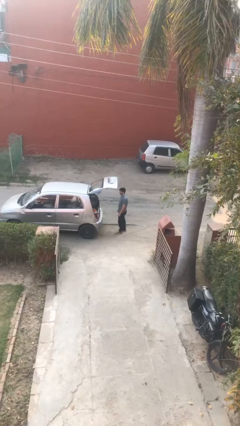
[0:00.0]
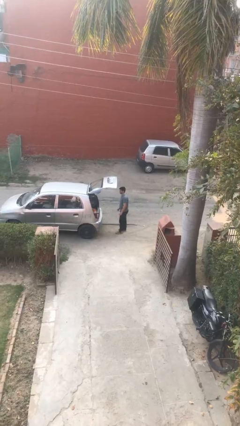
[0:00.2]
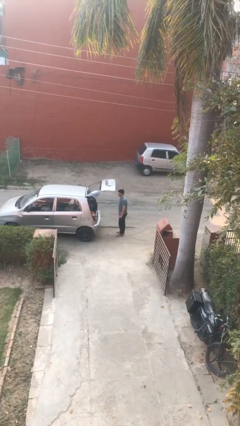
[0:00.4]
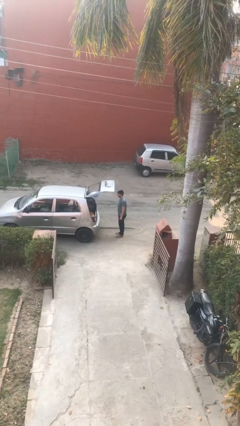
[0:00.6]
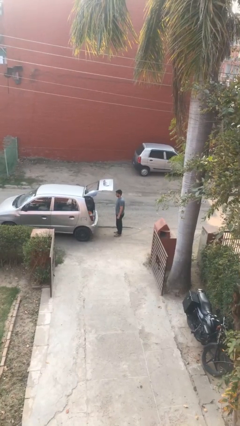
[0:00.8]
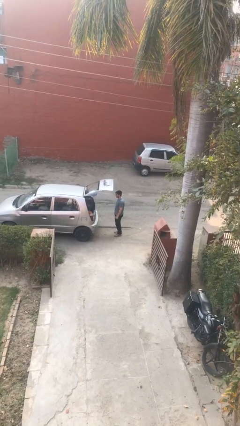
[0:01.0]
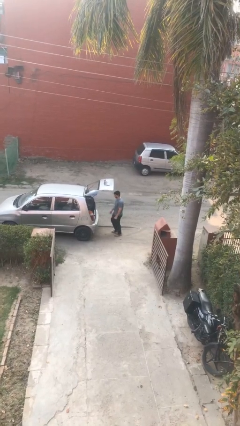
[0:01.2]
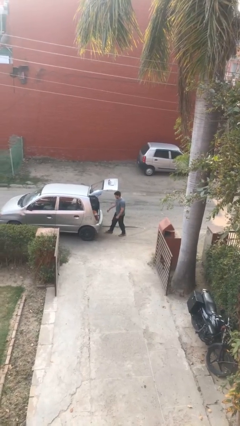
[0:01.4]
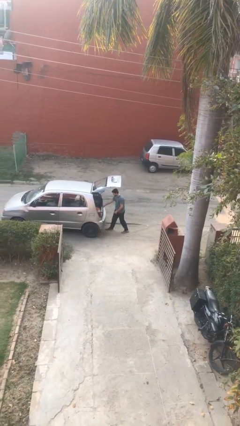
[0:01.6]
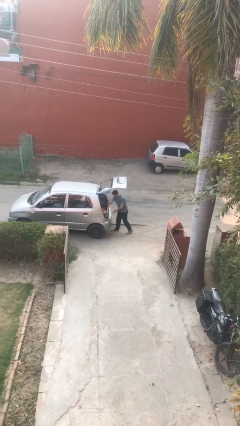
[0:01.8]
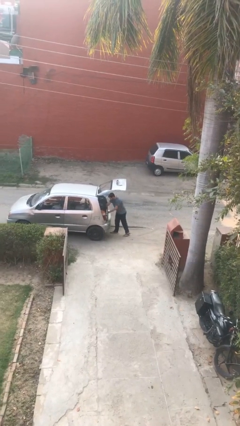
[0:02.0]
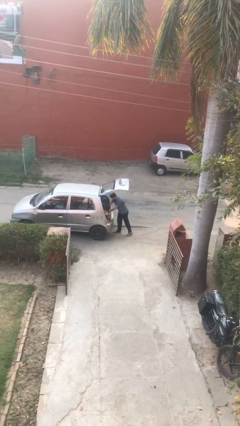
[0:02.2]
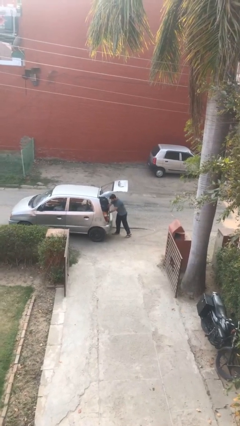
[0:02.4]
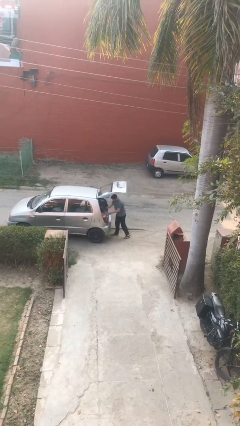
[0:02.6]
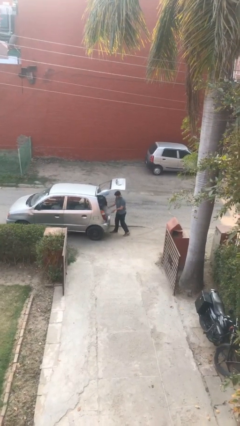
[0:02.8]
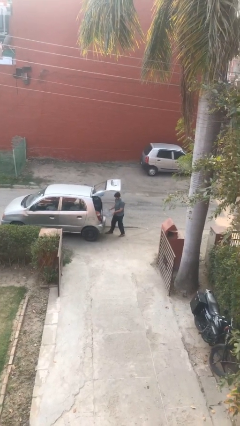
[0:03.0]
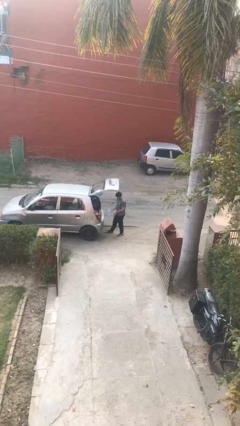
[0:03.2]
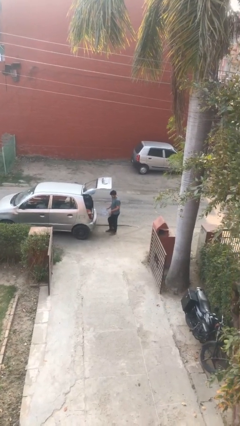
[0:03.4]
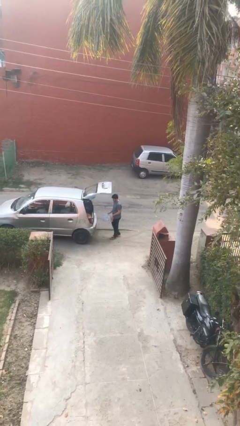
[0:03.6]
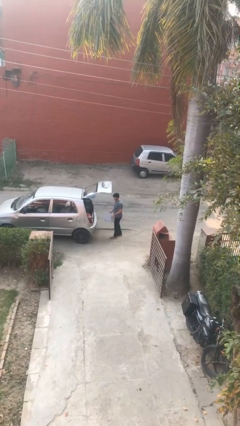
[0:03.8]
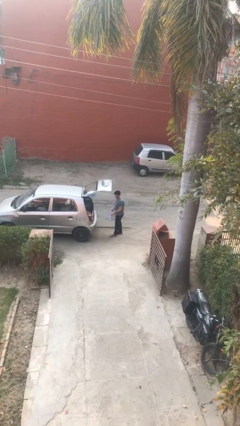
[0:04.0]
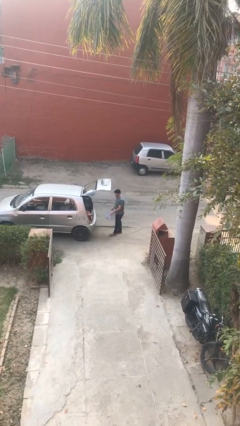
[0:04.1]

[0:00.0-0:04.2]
person unloads car

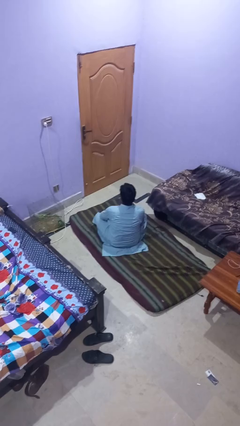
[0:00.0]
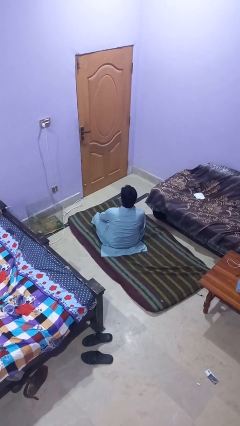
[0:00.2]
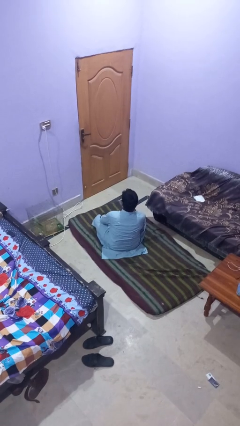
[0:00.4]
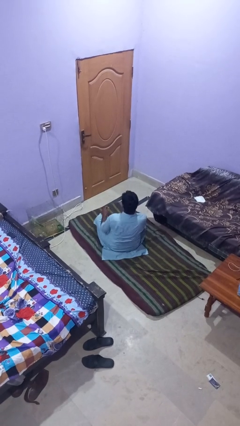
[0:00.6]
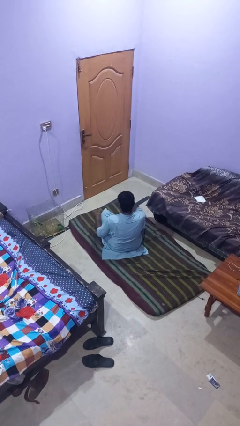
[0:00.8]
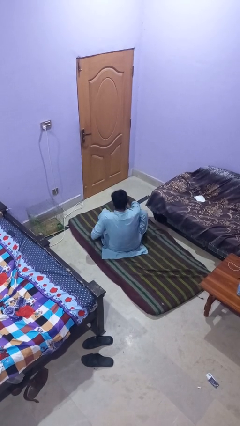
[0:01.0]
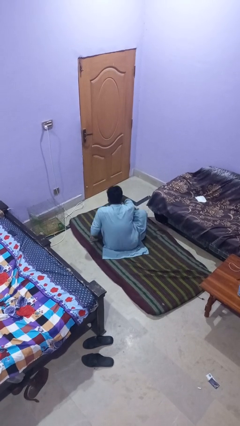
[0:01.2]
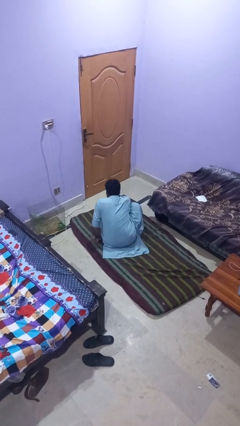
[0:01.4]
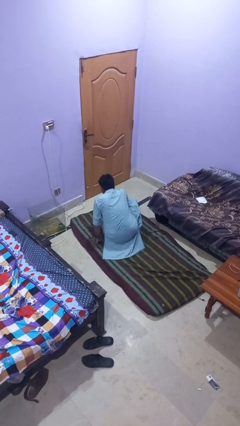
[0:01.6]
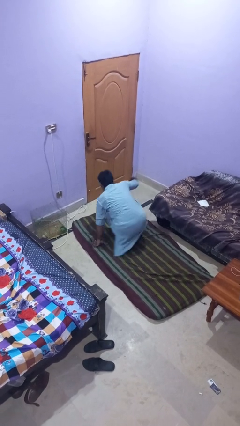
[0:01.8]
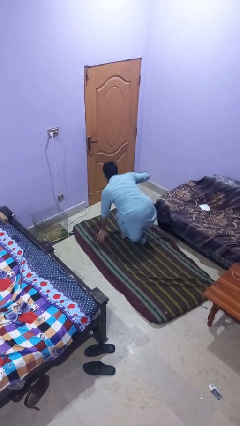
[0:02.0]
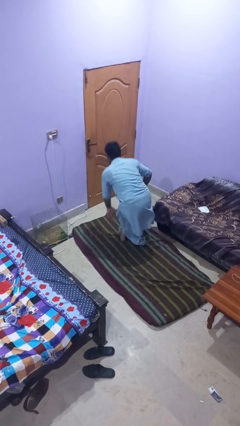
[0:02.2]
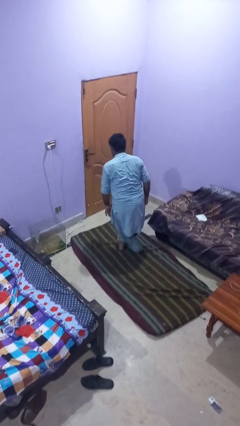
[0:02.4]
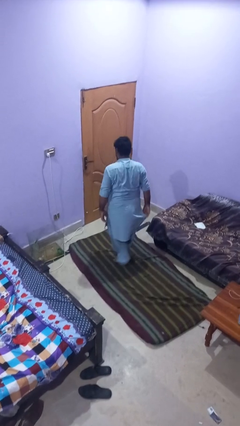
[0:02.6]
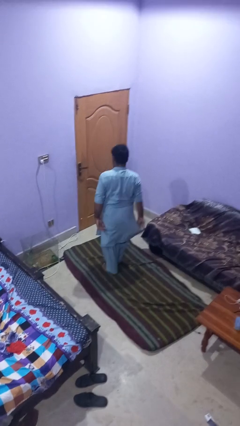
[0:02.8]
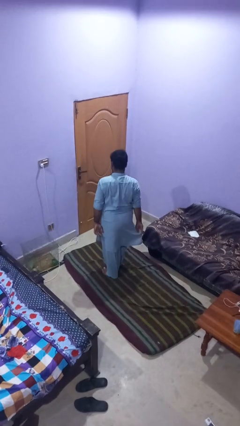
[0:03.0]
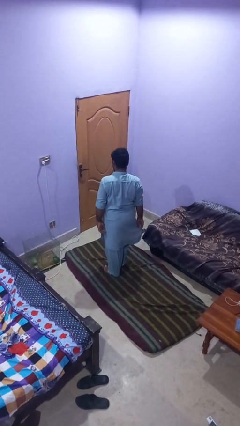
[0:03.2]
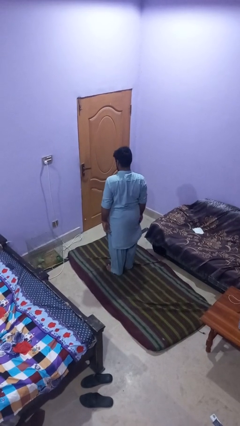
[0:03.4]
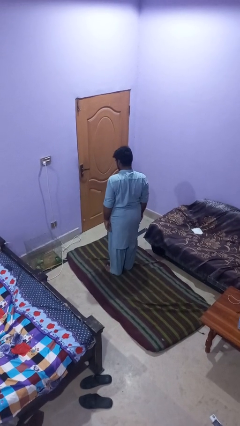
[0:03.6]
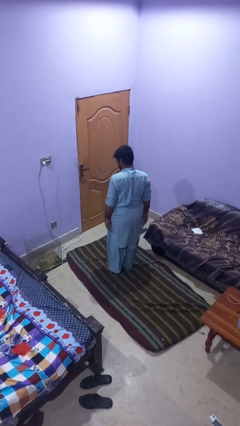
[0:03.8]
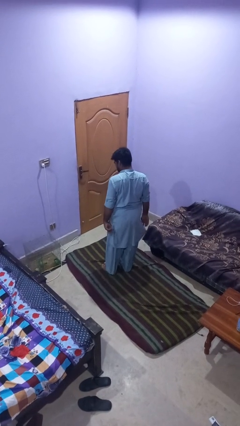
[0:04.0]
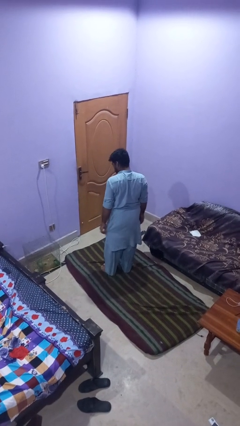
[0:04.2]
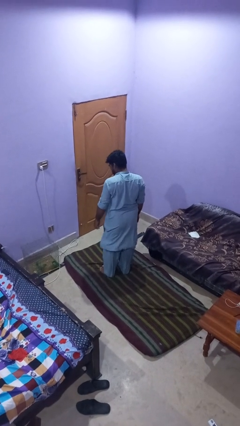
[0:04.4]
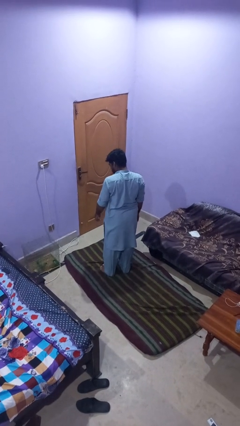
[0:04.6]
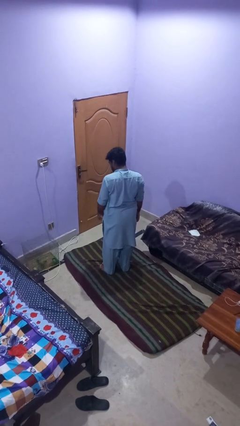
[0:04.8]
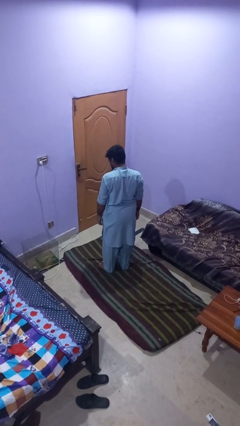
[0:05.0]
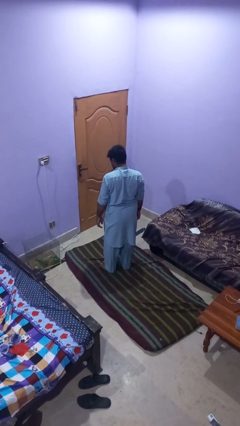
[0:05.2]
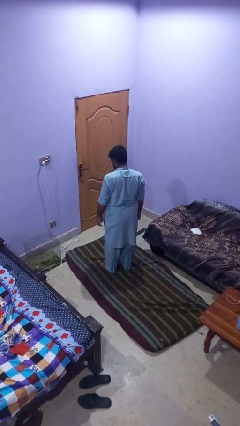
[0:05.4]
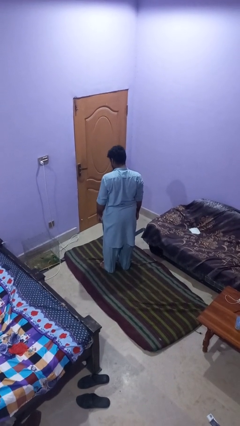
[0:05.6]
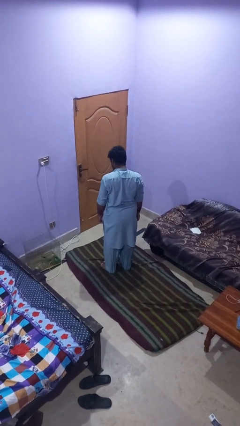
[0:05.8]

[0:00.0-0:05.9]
person stands up from floor

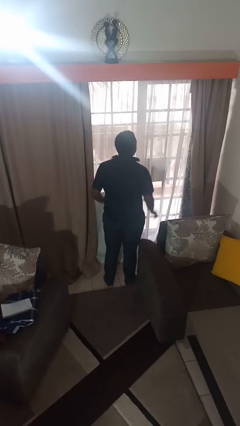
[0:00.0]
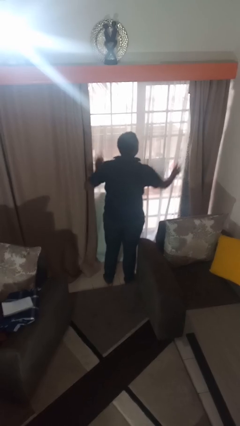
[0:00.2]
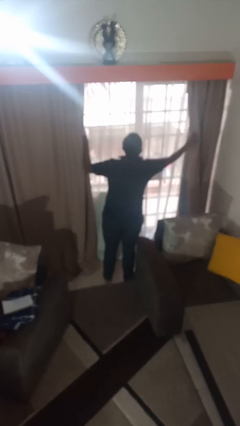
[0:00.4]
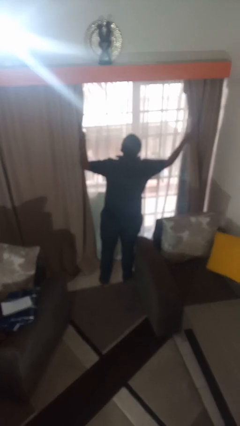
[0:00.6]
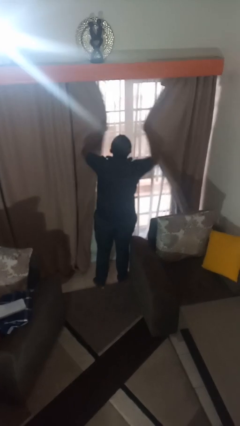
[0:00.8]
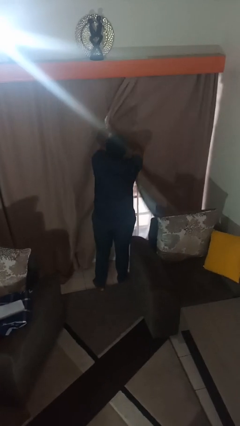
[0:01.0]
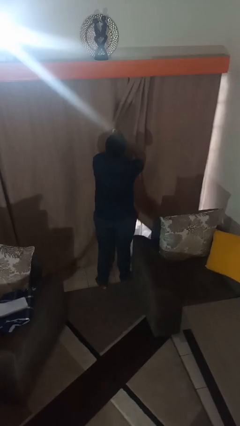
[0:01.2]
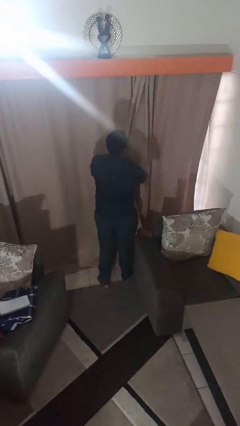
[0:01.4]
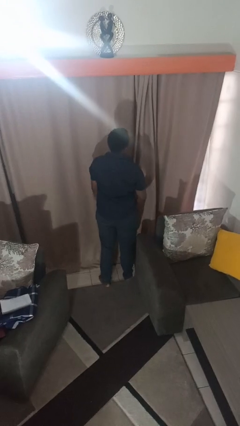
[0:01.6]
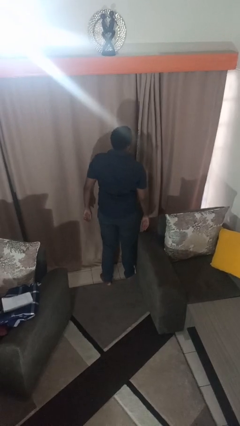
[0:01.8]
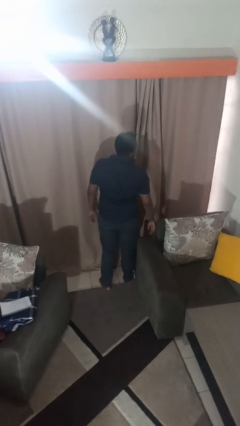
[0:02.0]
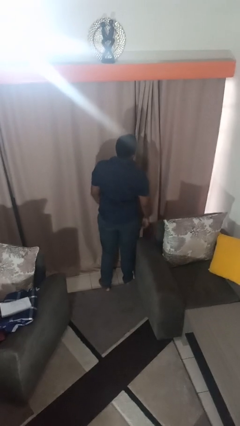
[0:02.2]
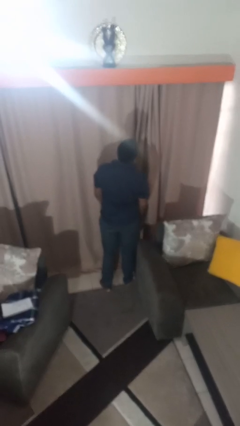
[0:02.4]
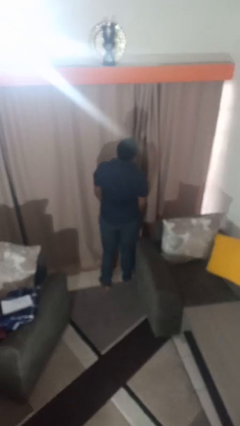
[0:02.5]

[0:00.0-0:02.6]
person closes curtains

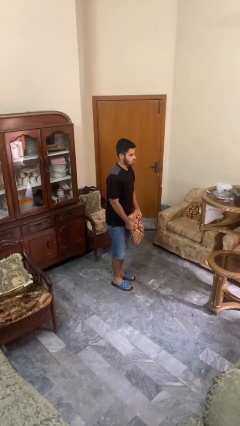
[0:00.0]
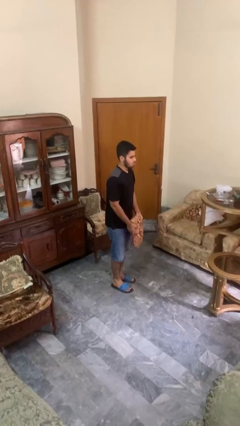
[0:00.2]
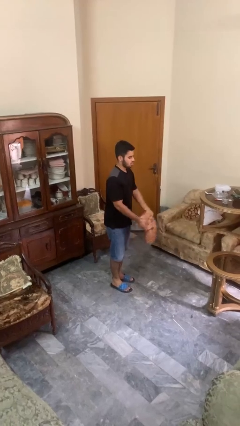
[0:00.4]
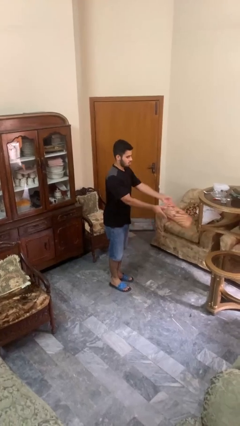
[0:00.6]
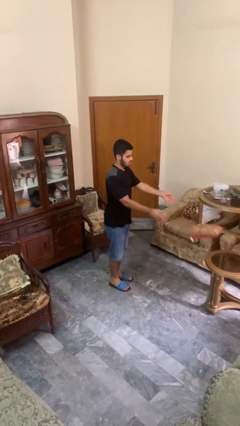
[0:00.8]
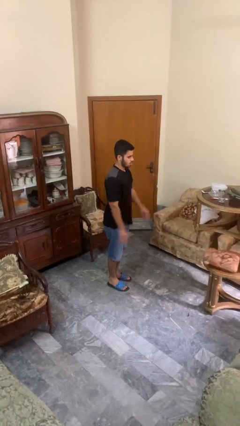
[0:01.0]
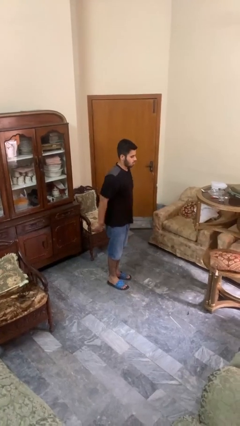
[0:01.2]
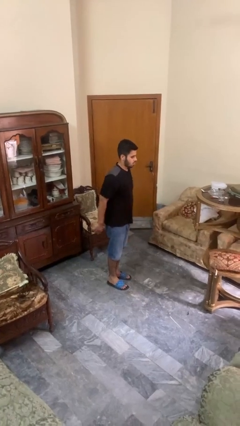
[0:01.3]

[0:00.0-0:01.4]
person throws object on table

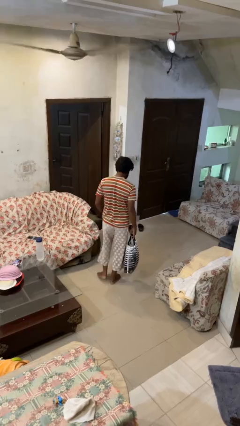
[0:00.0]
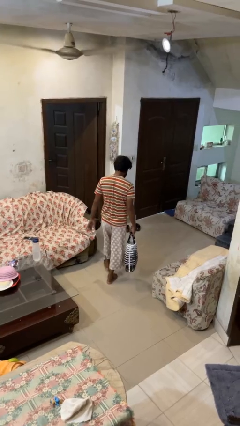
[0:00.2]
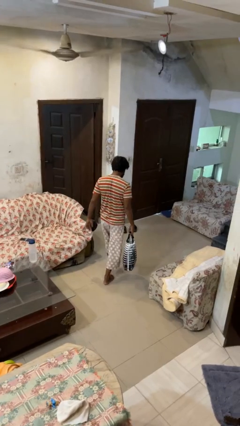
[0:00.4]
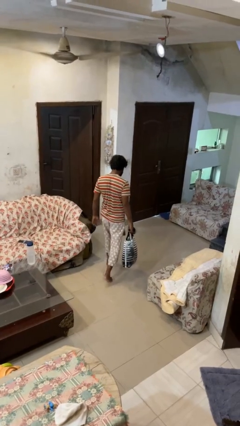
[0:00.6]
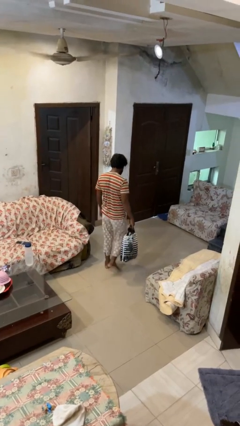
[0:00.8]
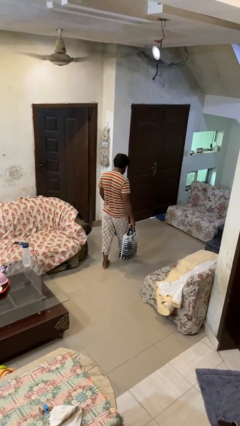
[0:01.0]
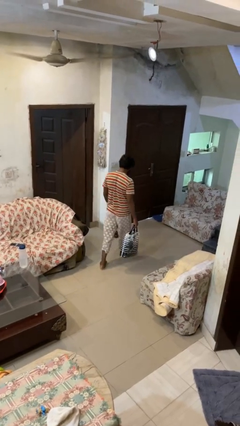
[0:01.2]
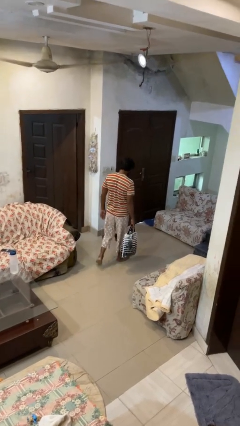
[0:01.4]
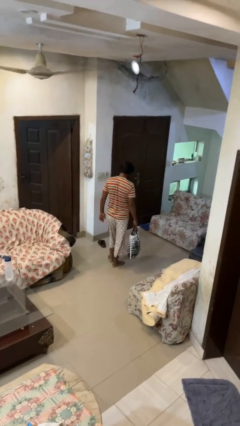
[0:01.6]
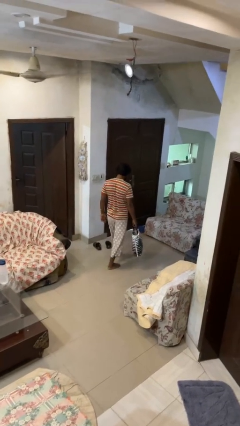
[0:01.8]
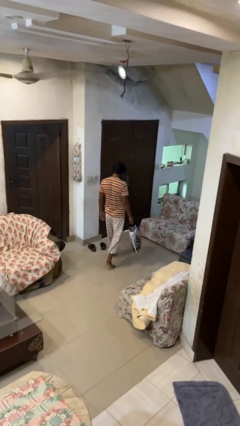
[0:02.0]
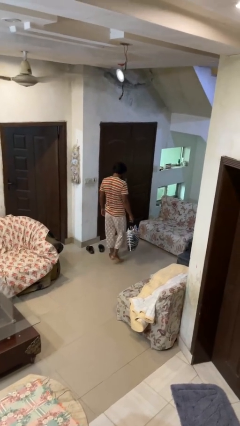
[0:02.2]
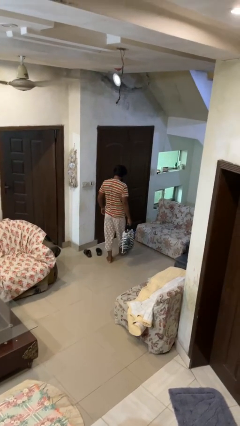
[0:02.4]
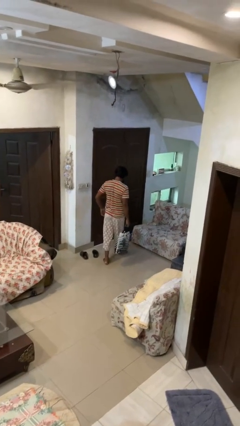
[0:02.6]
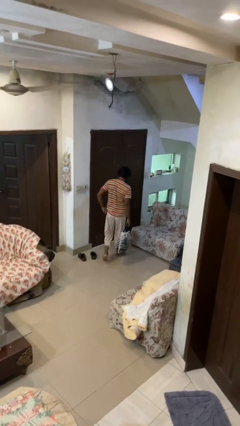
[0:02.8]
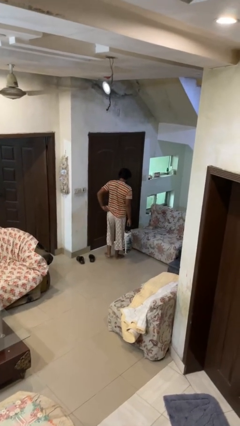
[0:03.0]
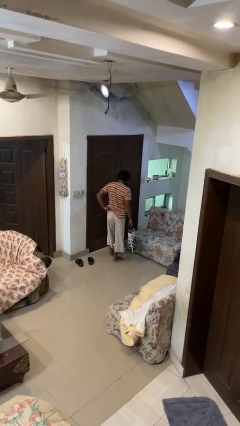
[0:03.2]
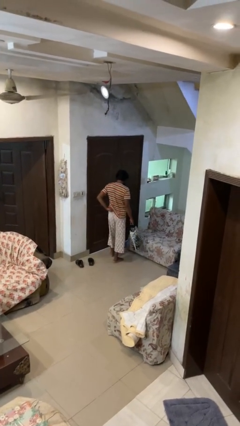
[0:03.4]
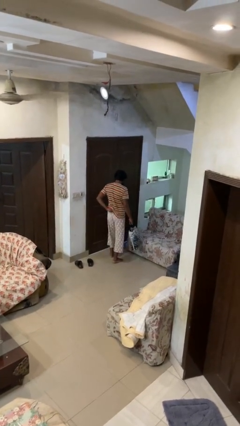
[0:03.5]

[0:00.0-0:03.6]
person carries groceries
